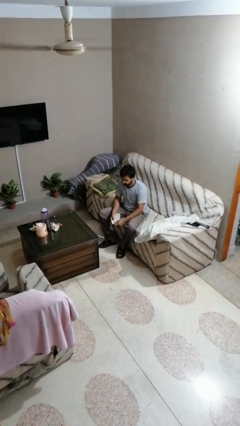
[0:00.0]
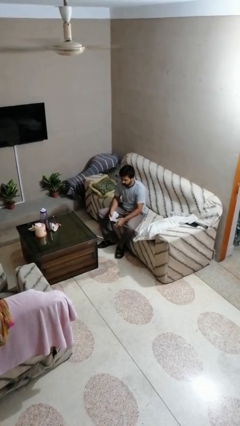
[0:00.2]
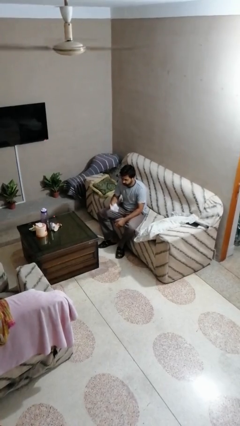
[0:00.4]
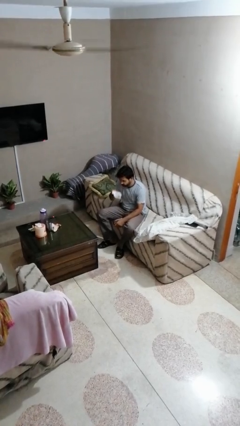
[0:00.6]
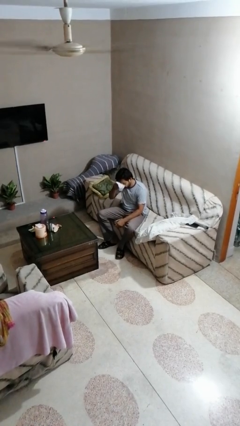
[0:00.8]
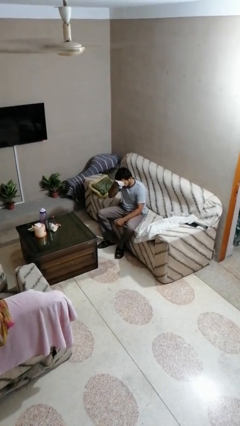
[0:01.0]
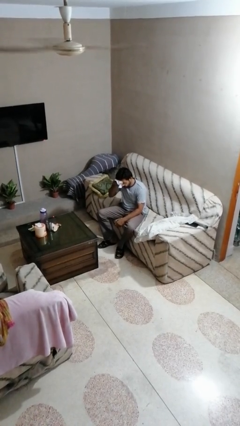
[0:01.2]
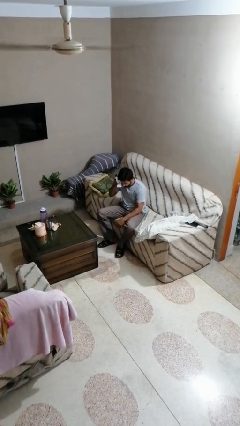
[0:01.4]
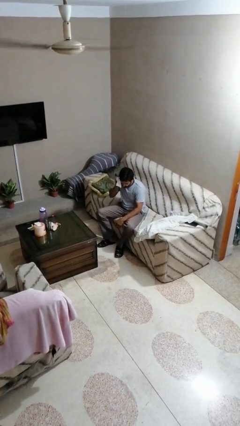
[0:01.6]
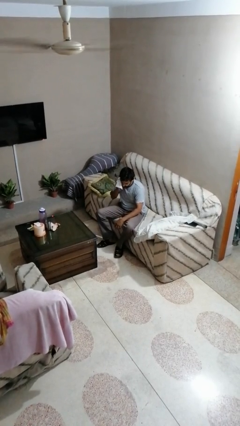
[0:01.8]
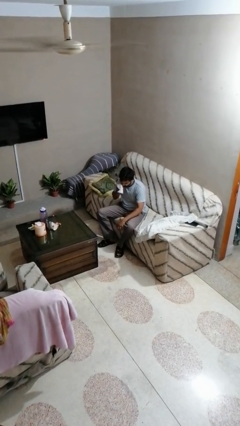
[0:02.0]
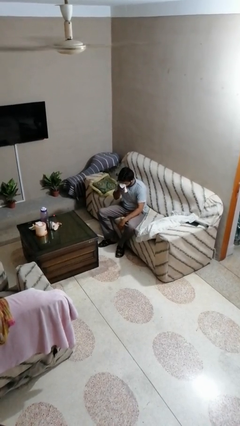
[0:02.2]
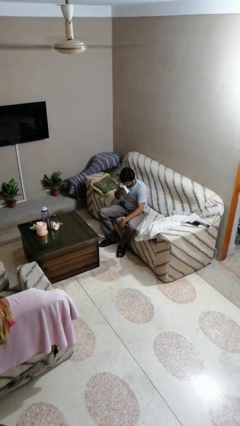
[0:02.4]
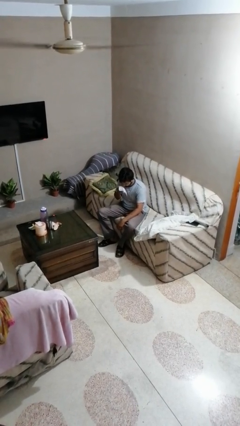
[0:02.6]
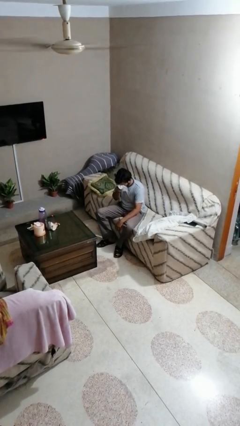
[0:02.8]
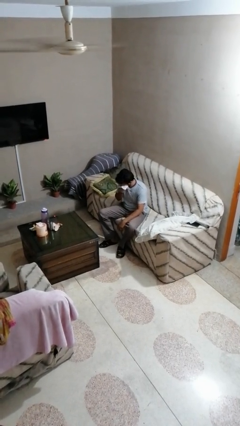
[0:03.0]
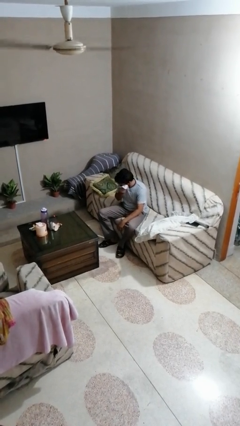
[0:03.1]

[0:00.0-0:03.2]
person wipes mouth with napkin

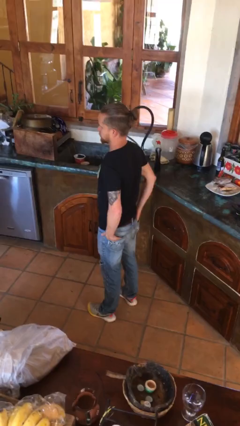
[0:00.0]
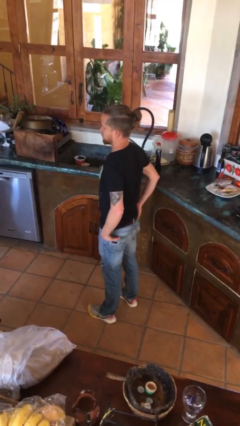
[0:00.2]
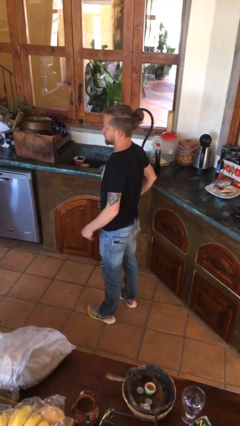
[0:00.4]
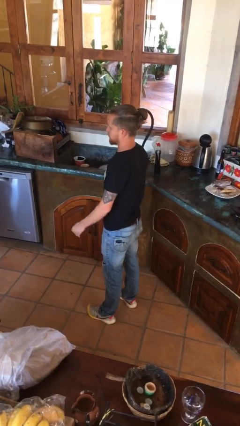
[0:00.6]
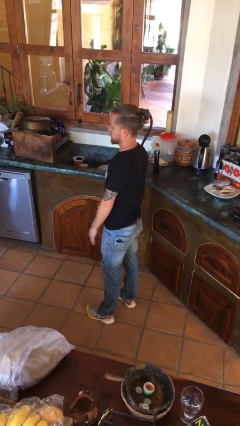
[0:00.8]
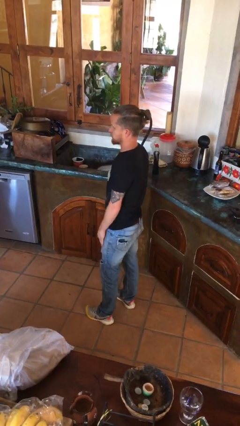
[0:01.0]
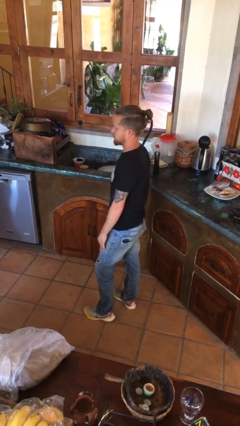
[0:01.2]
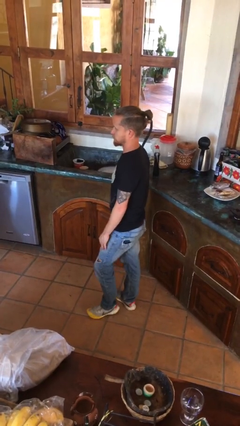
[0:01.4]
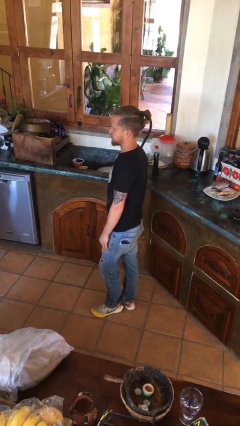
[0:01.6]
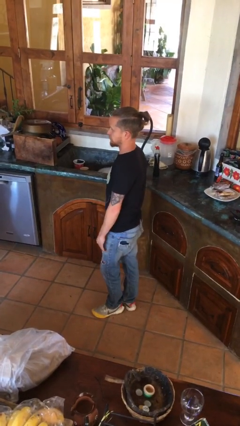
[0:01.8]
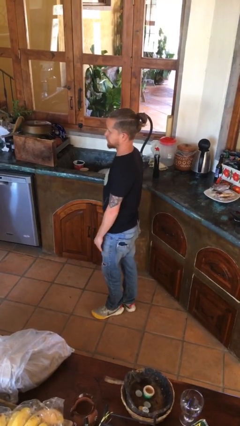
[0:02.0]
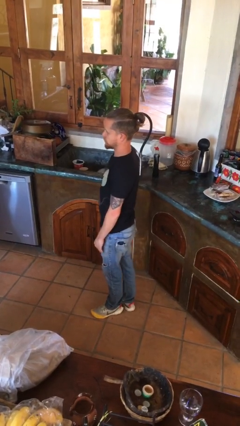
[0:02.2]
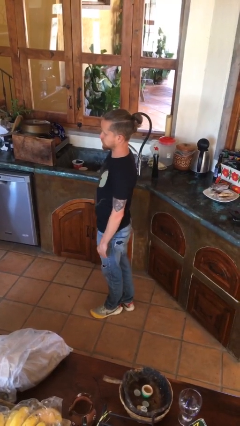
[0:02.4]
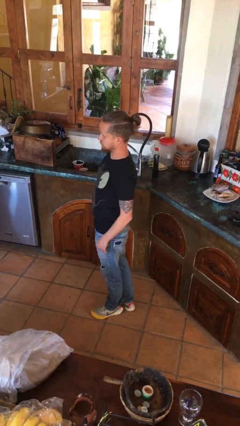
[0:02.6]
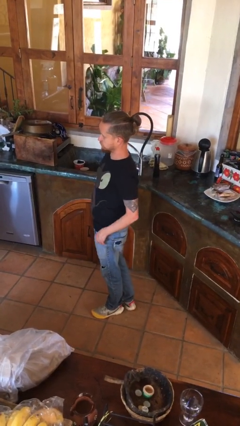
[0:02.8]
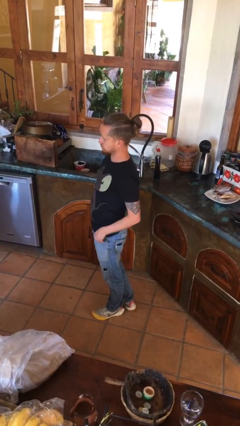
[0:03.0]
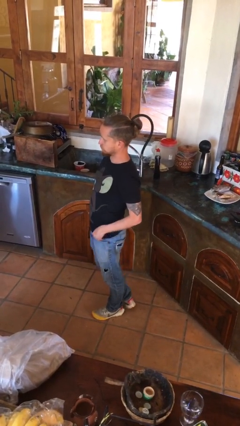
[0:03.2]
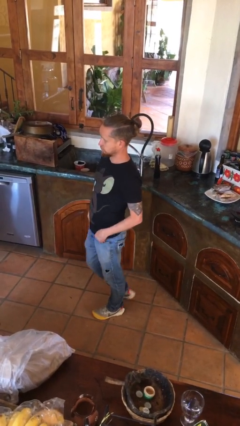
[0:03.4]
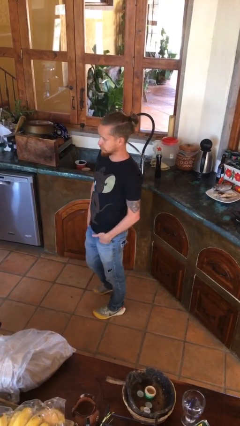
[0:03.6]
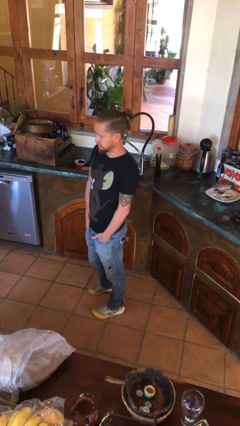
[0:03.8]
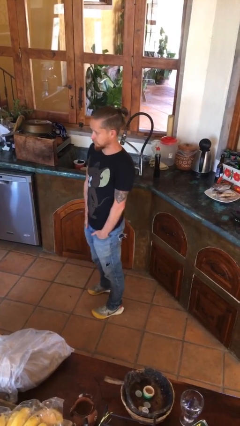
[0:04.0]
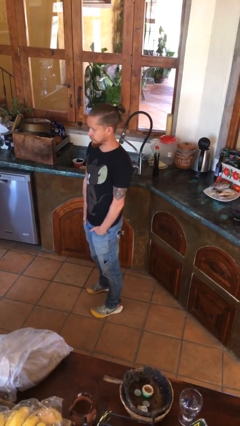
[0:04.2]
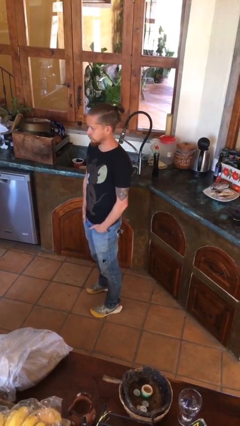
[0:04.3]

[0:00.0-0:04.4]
person puts hands in back pockets

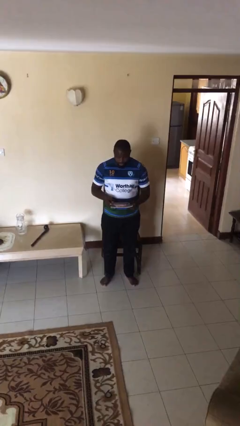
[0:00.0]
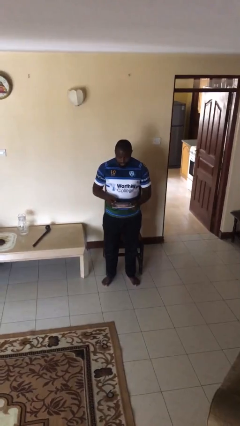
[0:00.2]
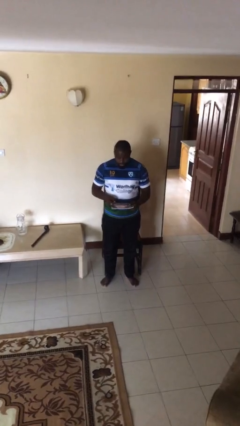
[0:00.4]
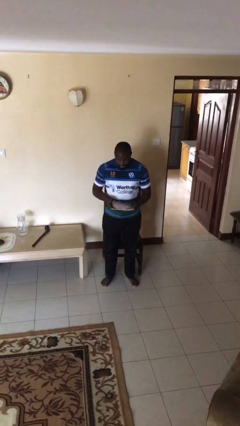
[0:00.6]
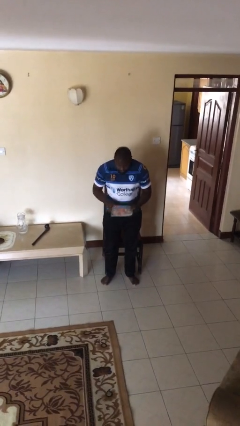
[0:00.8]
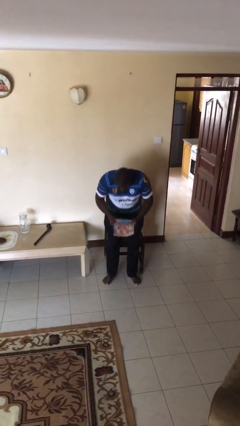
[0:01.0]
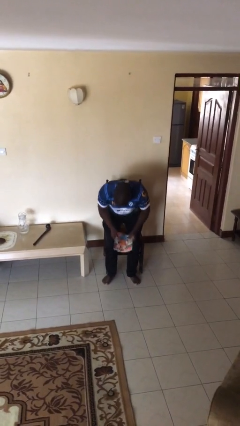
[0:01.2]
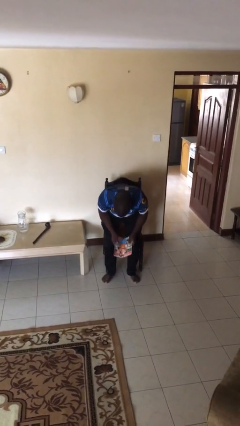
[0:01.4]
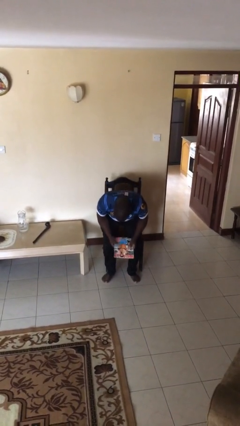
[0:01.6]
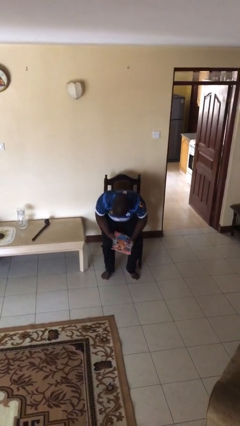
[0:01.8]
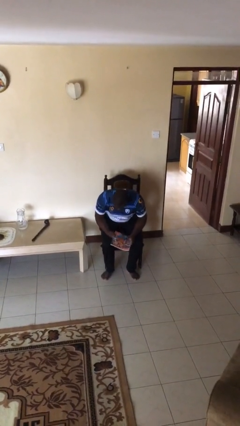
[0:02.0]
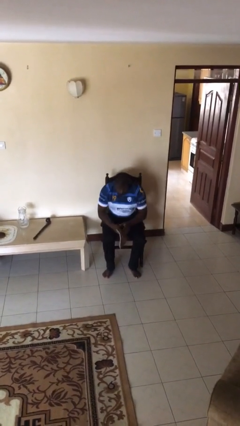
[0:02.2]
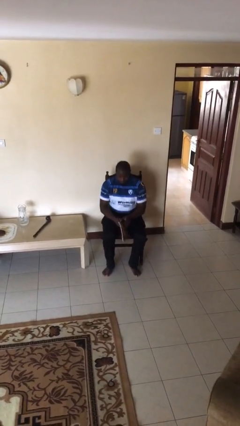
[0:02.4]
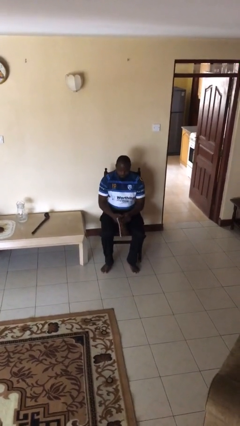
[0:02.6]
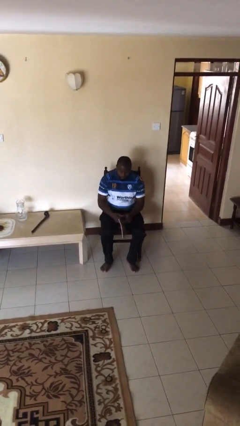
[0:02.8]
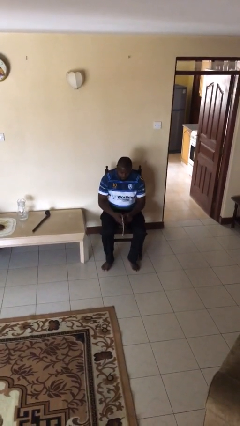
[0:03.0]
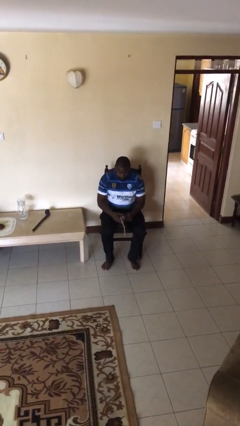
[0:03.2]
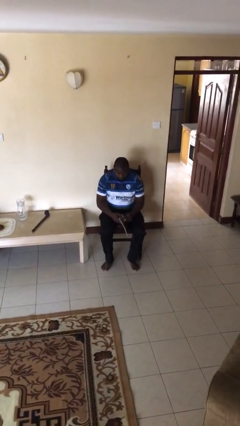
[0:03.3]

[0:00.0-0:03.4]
person sits down

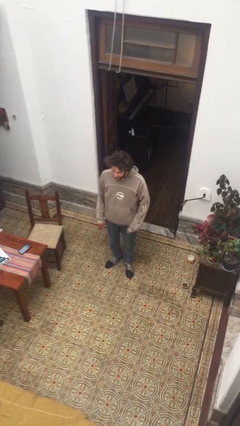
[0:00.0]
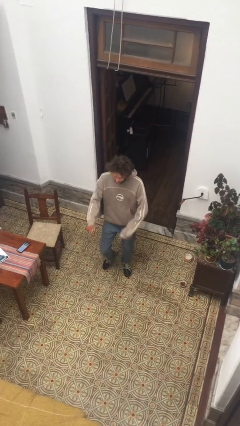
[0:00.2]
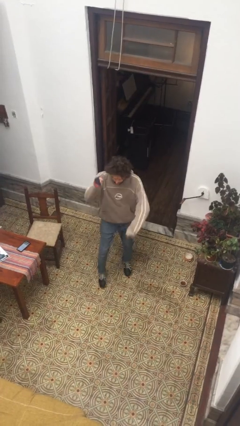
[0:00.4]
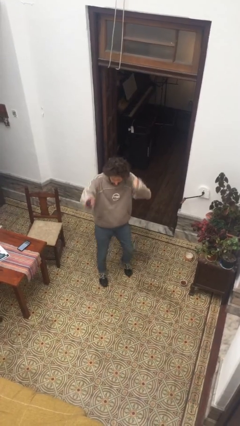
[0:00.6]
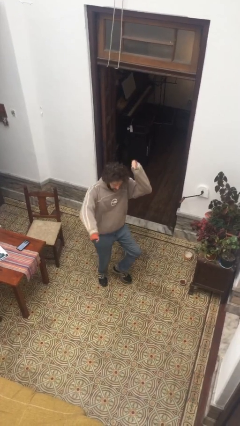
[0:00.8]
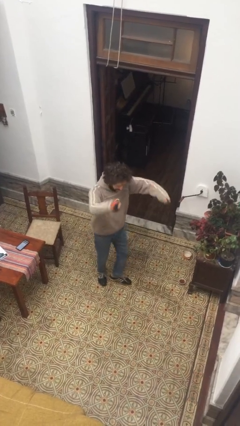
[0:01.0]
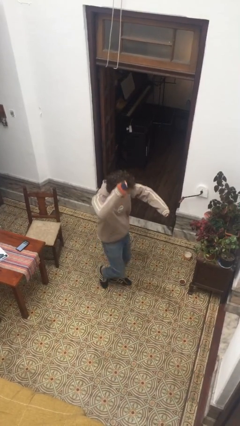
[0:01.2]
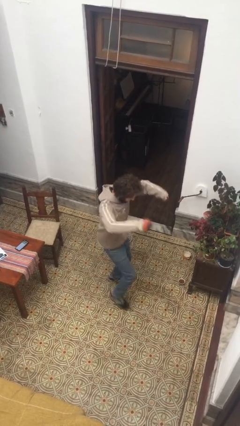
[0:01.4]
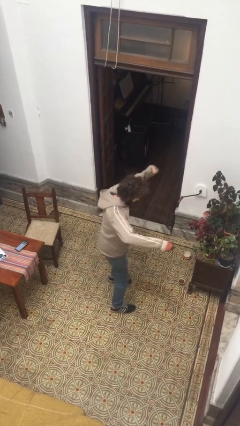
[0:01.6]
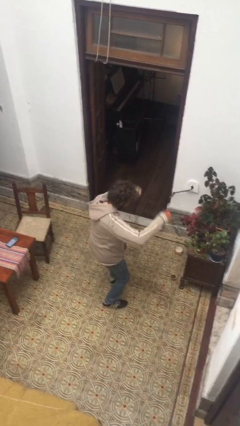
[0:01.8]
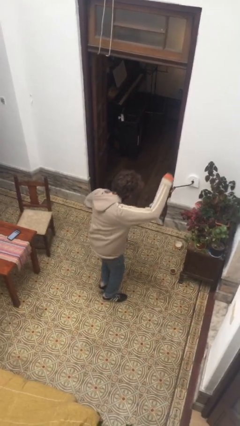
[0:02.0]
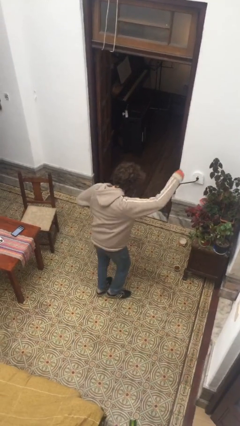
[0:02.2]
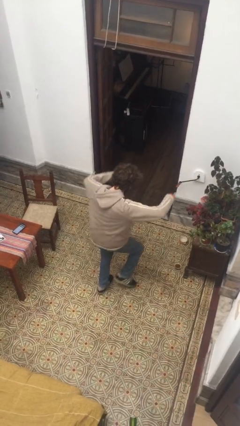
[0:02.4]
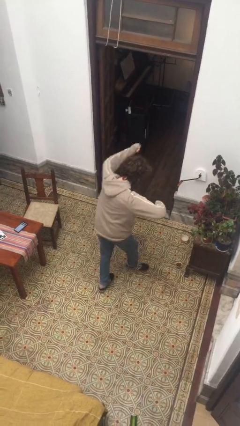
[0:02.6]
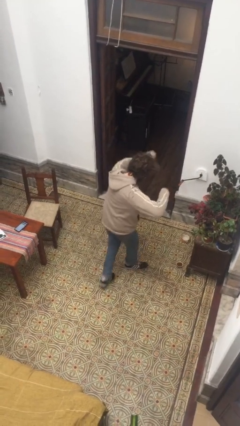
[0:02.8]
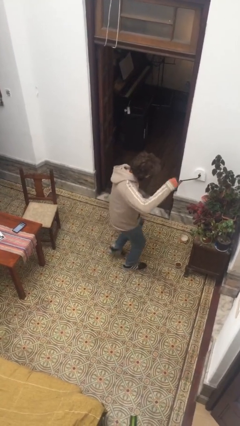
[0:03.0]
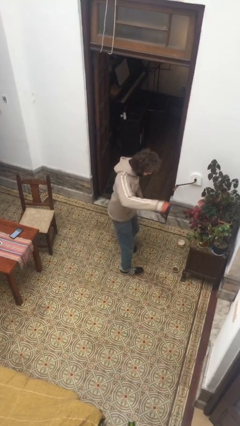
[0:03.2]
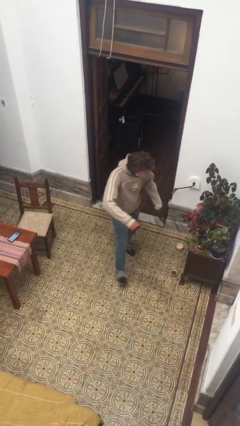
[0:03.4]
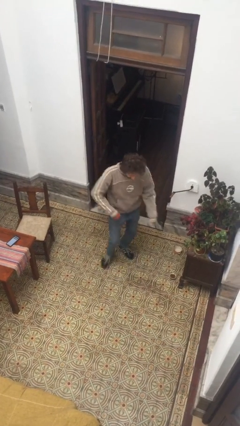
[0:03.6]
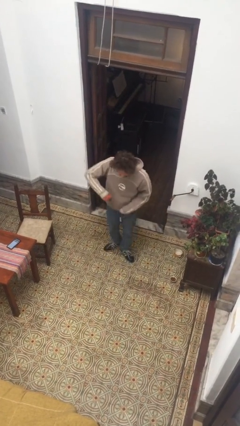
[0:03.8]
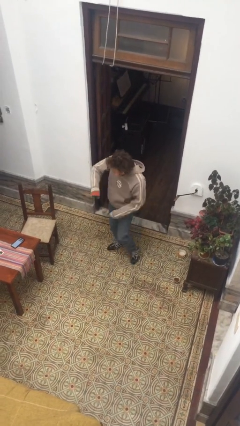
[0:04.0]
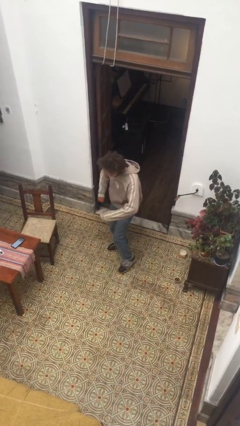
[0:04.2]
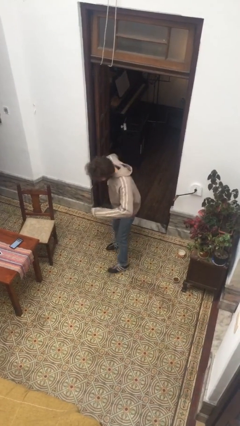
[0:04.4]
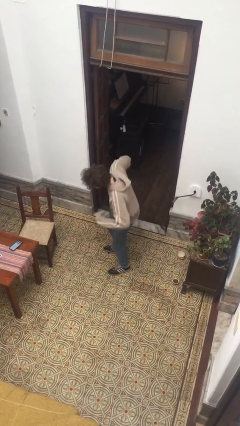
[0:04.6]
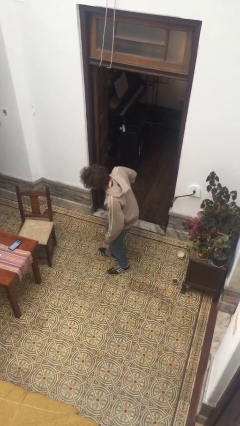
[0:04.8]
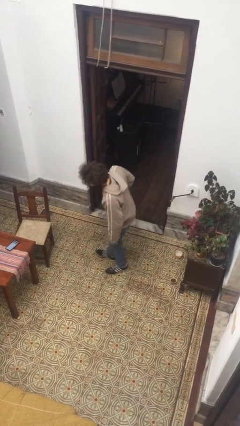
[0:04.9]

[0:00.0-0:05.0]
person dances in place

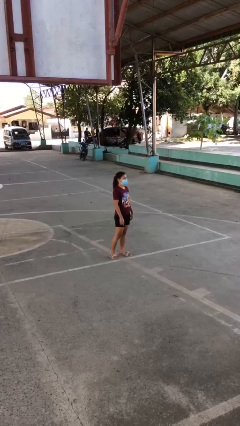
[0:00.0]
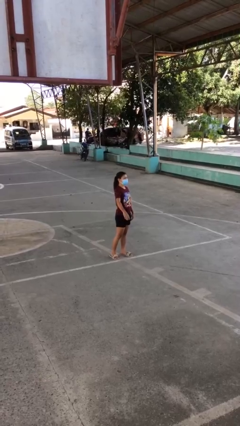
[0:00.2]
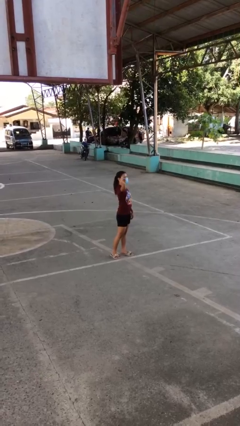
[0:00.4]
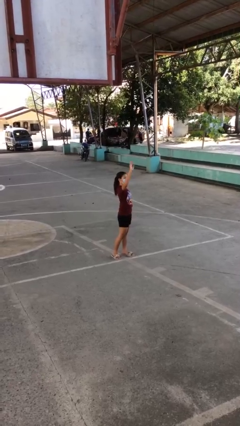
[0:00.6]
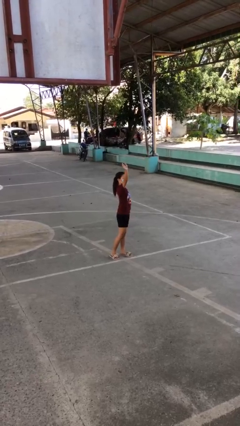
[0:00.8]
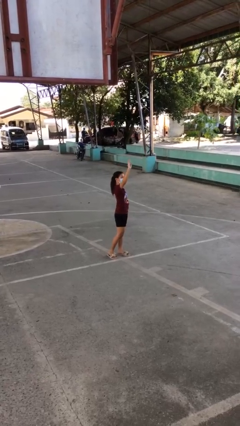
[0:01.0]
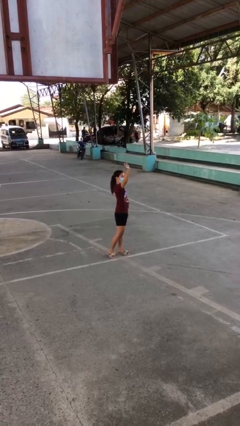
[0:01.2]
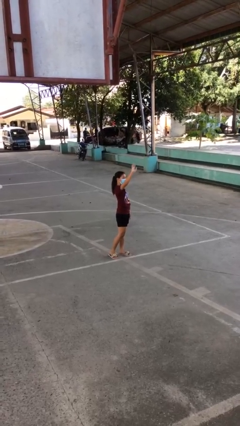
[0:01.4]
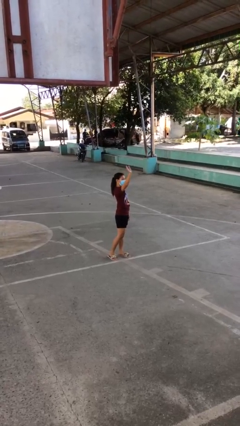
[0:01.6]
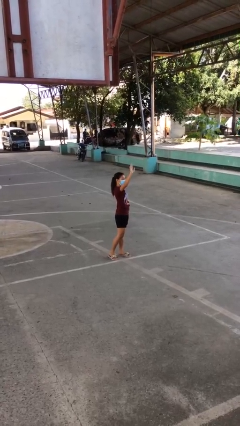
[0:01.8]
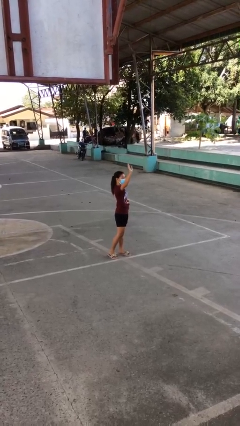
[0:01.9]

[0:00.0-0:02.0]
person waves at person
